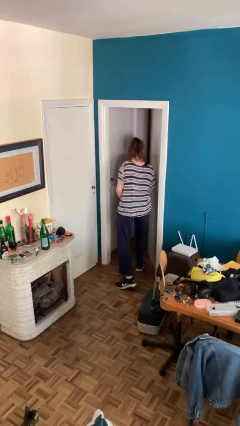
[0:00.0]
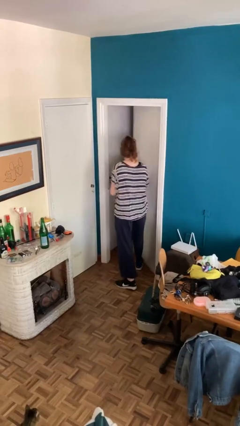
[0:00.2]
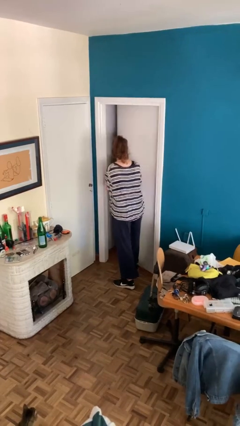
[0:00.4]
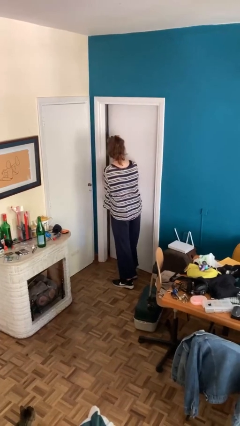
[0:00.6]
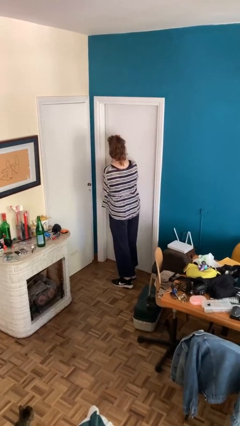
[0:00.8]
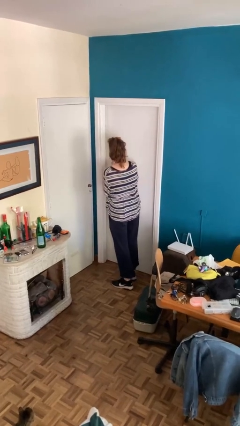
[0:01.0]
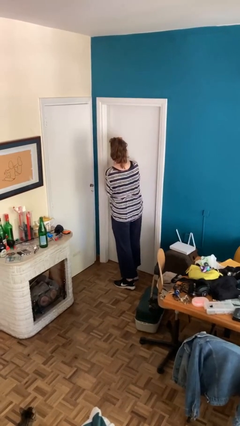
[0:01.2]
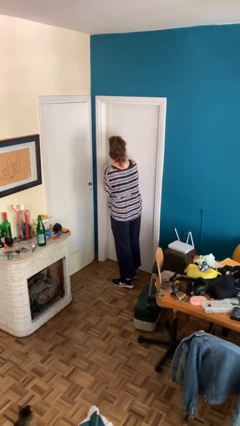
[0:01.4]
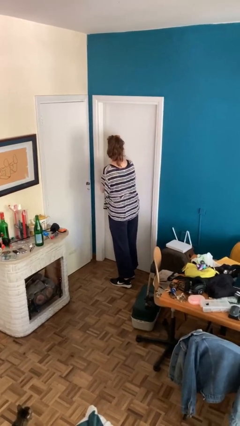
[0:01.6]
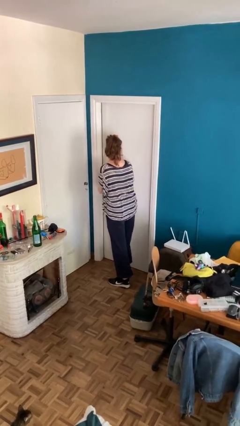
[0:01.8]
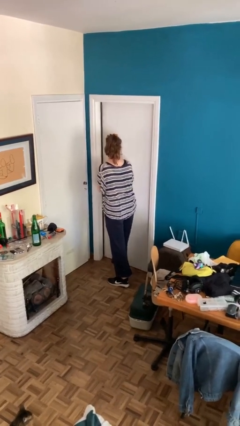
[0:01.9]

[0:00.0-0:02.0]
person closes facility door

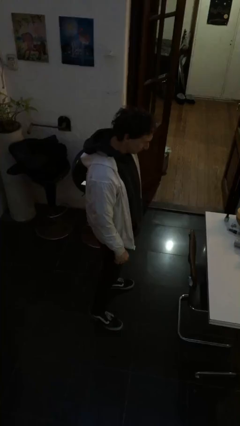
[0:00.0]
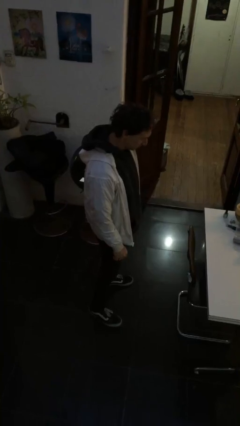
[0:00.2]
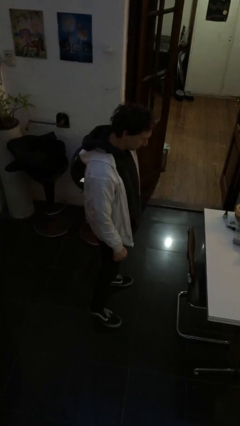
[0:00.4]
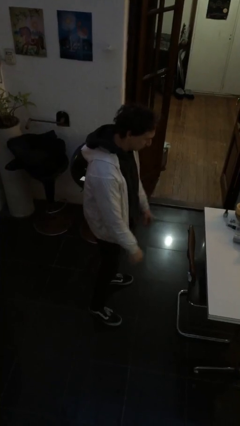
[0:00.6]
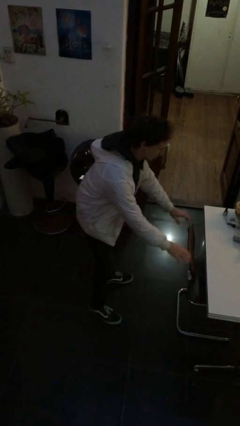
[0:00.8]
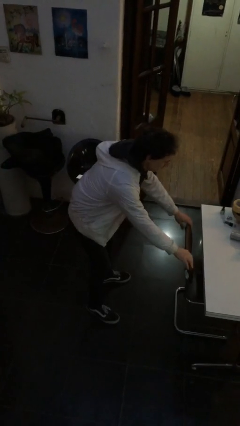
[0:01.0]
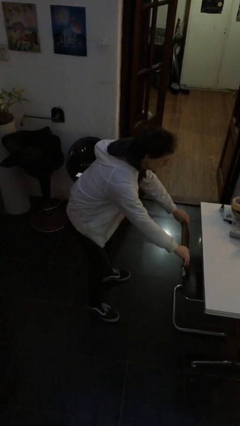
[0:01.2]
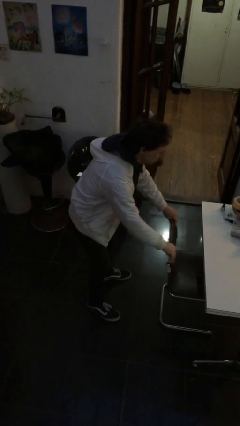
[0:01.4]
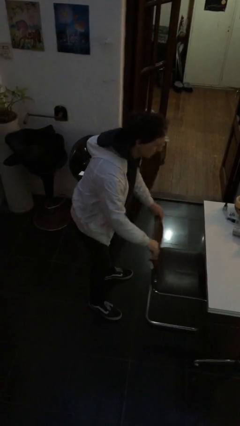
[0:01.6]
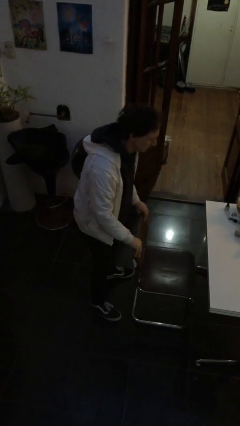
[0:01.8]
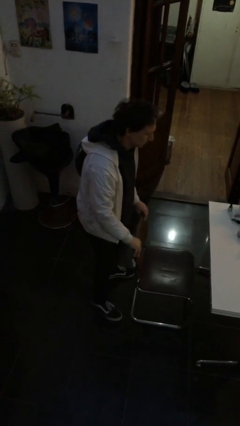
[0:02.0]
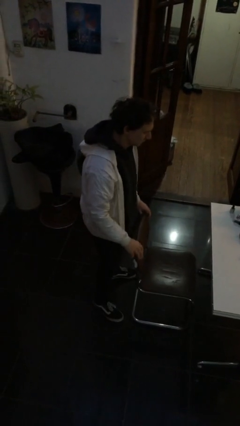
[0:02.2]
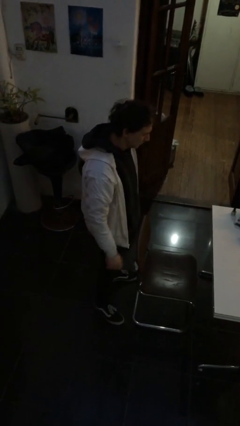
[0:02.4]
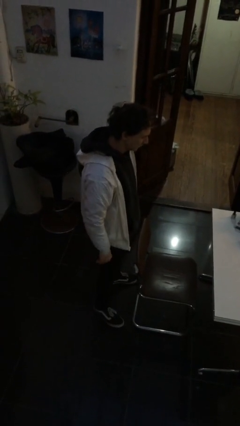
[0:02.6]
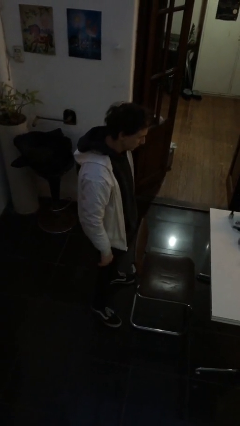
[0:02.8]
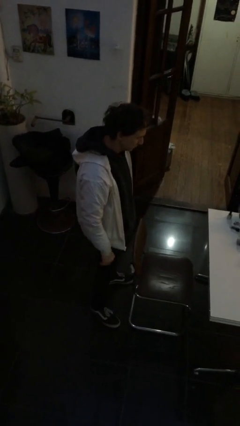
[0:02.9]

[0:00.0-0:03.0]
person pulls out chair

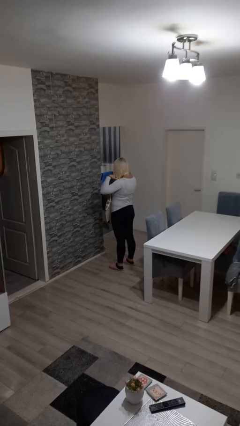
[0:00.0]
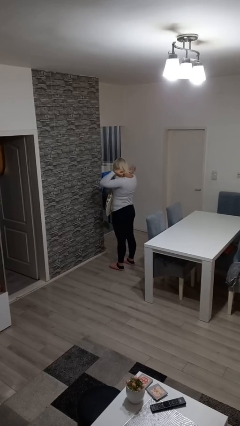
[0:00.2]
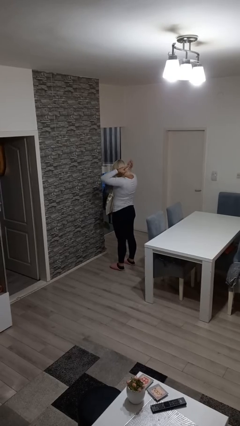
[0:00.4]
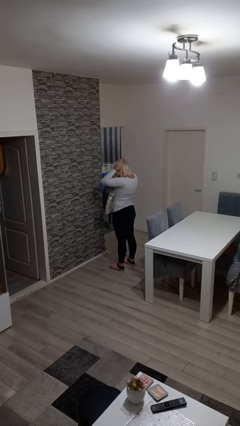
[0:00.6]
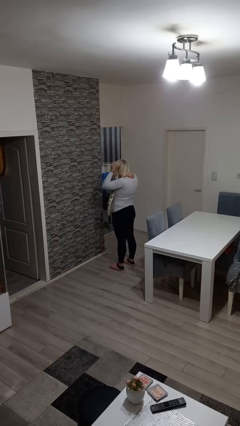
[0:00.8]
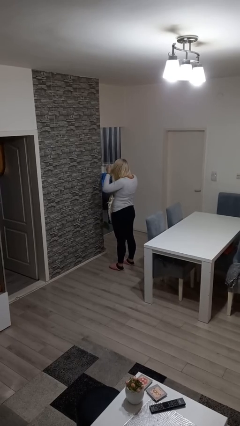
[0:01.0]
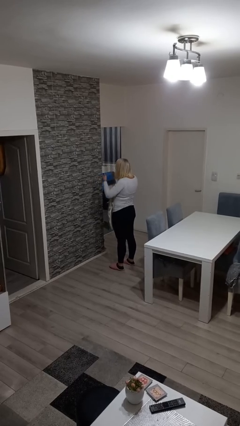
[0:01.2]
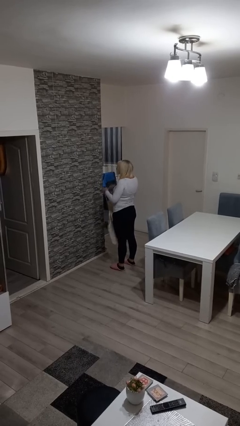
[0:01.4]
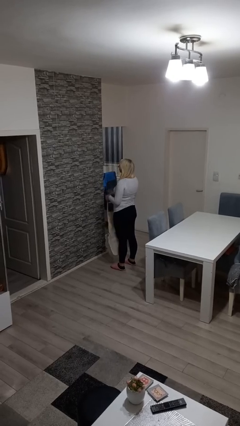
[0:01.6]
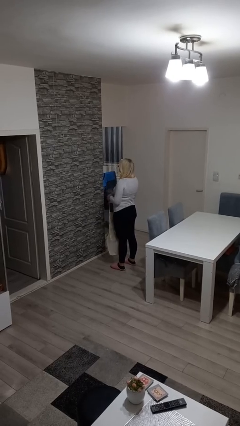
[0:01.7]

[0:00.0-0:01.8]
person takes off apron

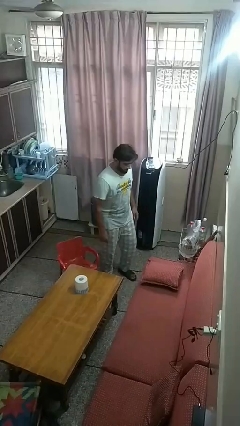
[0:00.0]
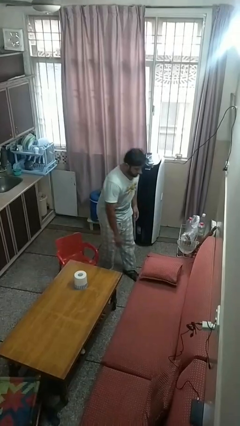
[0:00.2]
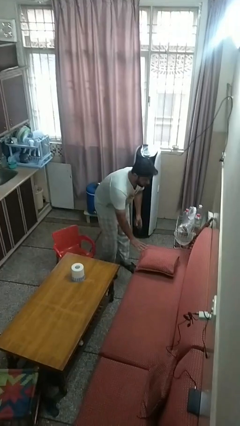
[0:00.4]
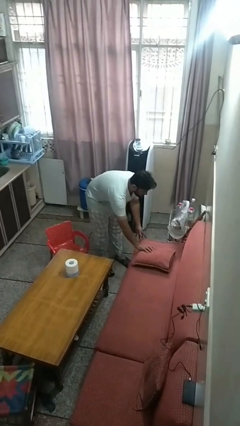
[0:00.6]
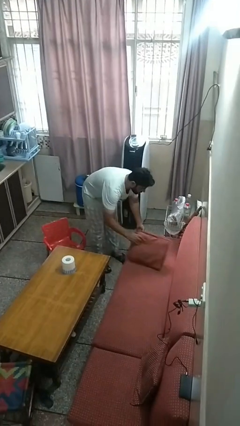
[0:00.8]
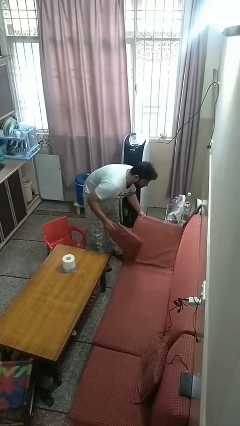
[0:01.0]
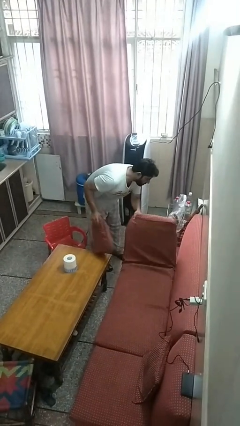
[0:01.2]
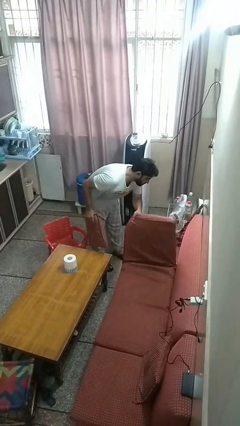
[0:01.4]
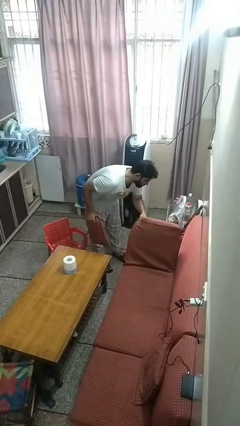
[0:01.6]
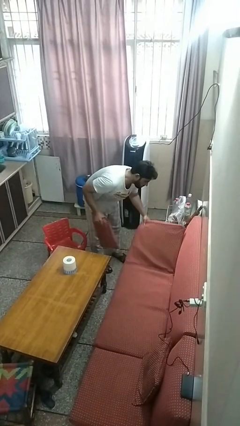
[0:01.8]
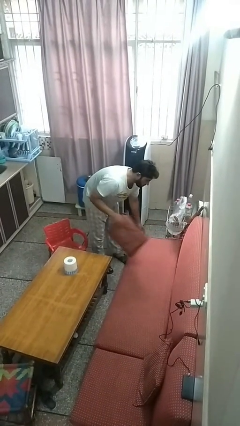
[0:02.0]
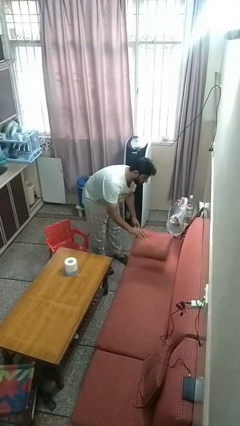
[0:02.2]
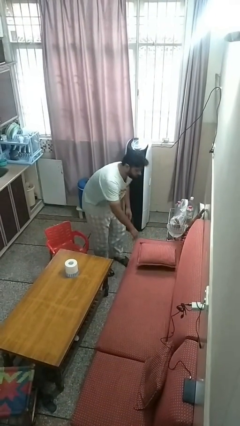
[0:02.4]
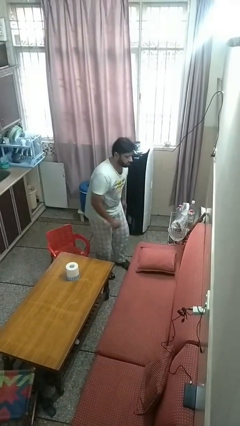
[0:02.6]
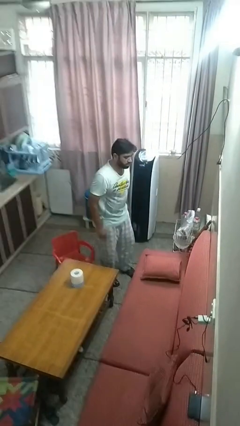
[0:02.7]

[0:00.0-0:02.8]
person searches under couch

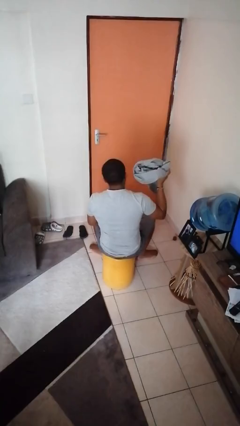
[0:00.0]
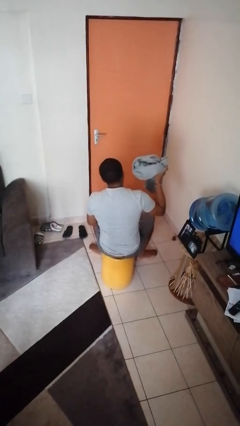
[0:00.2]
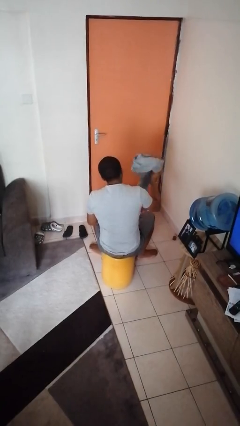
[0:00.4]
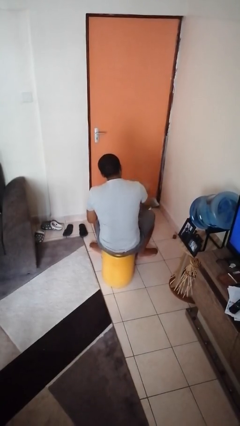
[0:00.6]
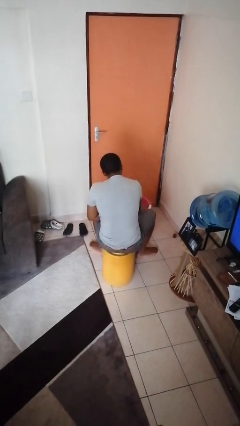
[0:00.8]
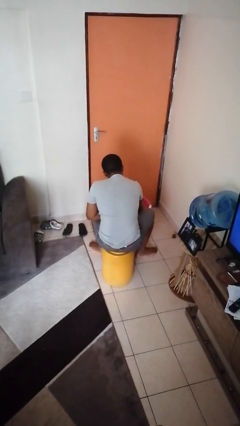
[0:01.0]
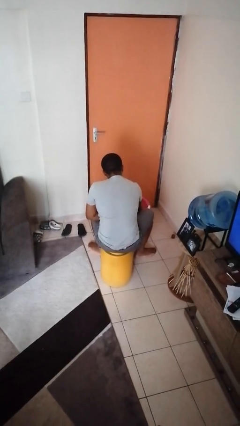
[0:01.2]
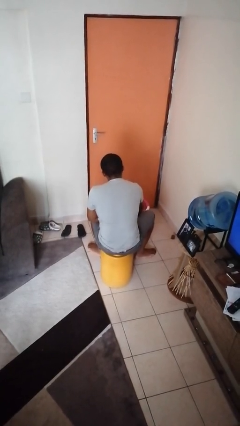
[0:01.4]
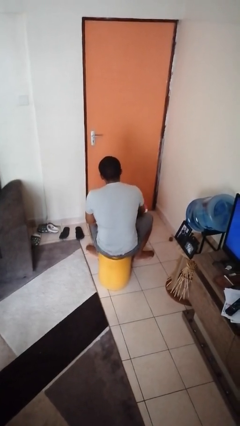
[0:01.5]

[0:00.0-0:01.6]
person puts object into basket

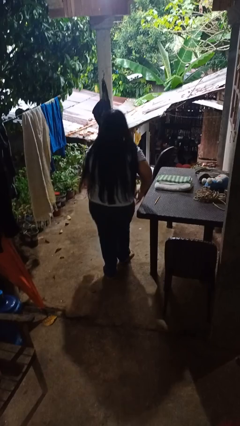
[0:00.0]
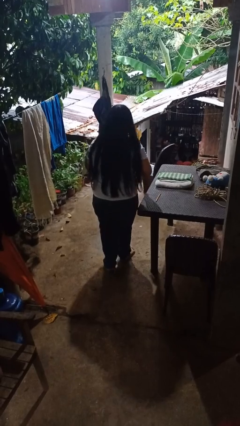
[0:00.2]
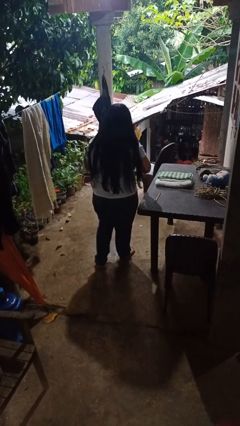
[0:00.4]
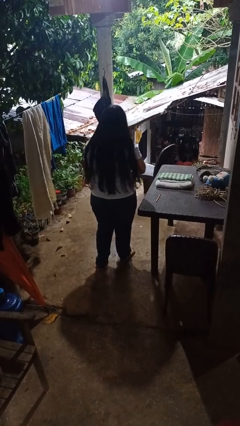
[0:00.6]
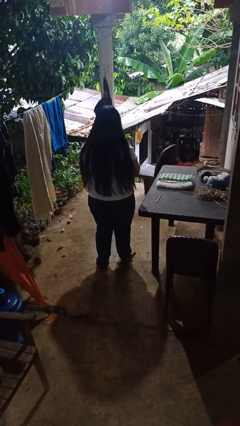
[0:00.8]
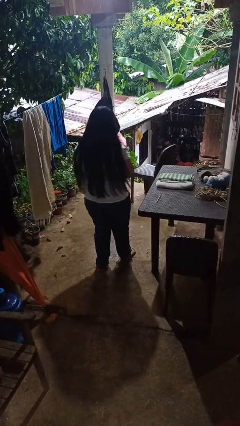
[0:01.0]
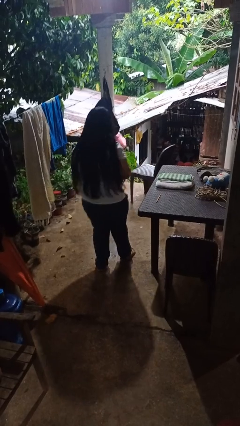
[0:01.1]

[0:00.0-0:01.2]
person bumps into table

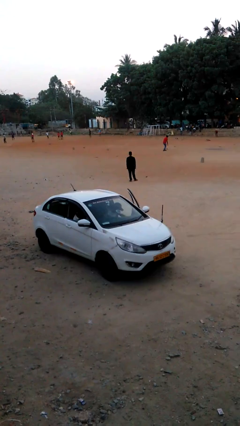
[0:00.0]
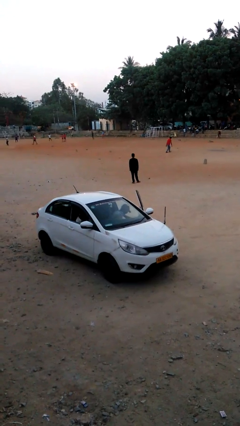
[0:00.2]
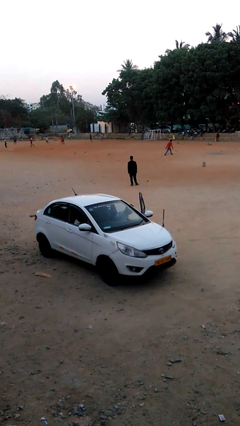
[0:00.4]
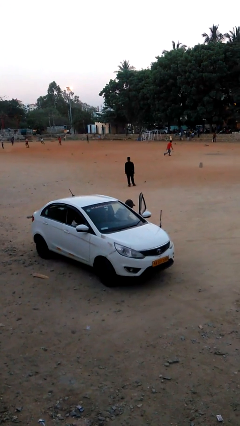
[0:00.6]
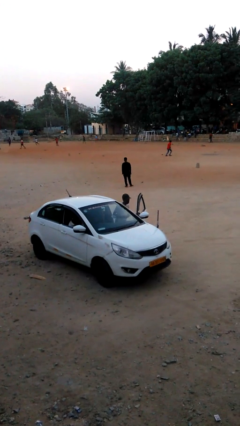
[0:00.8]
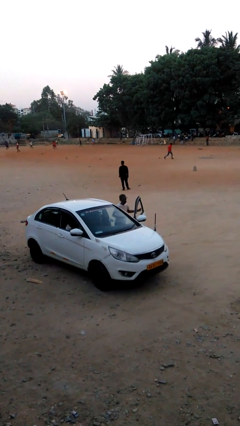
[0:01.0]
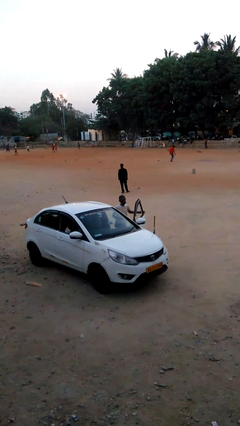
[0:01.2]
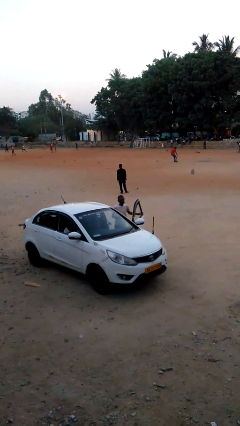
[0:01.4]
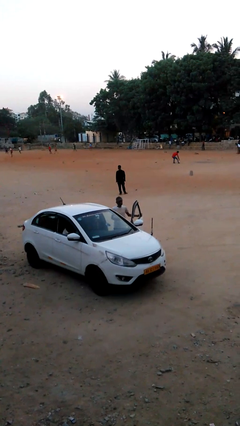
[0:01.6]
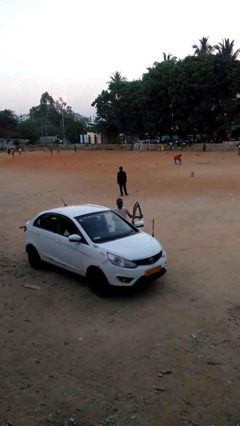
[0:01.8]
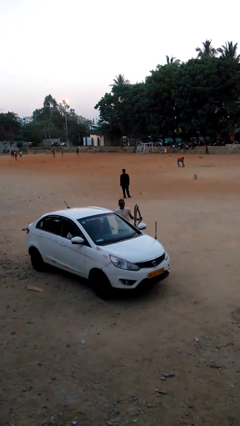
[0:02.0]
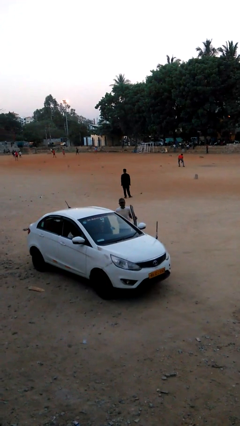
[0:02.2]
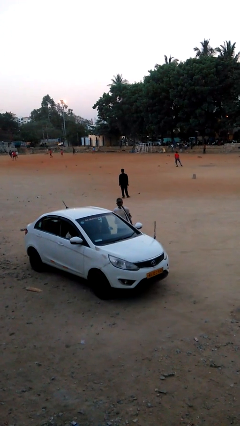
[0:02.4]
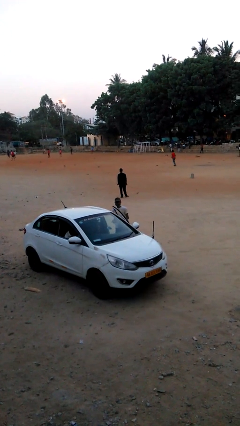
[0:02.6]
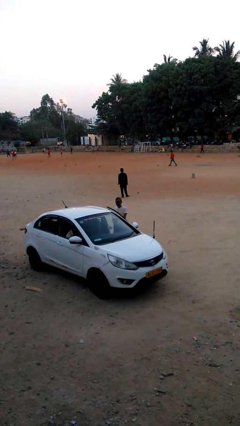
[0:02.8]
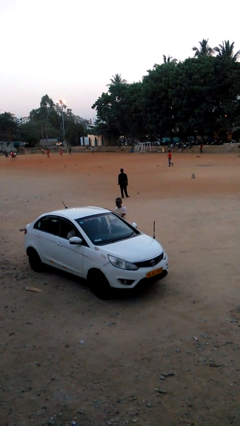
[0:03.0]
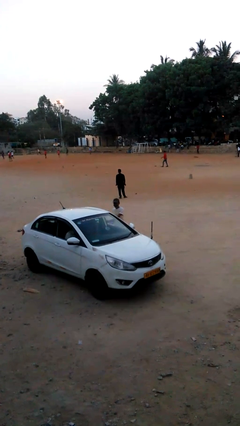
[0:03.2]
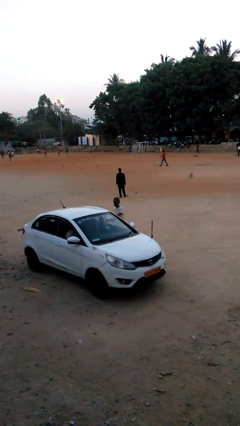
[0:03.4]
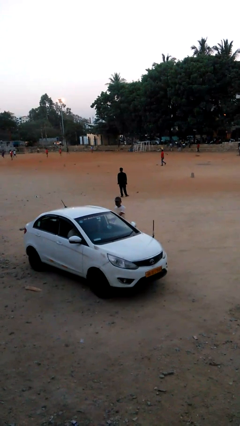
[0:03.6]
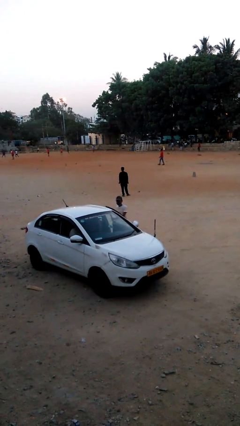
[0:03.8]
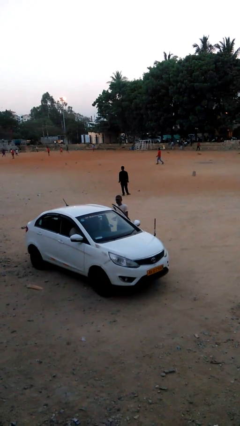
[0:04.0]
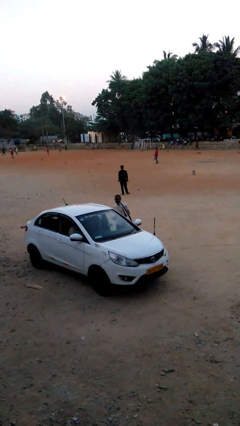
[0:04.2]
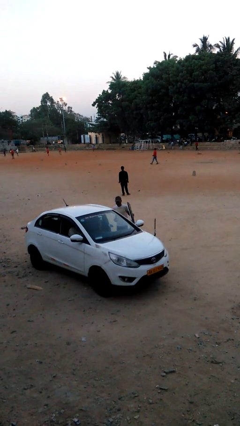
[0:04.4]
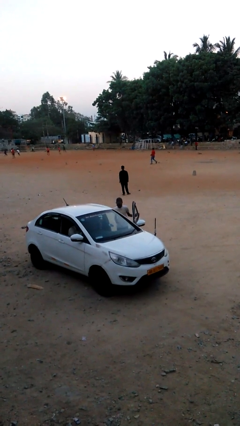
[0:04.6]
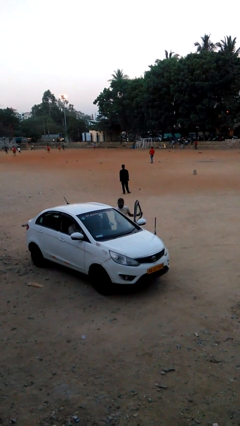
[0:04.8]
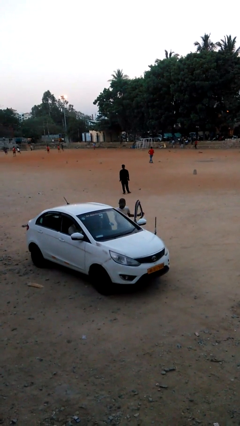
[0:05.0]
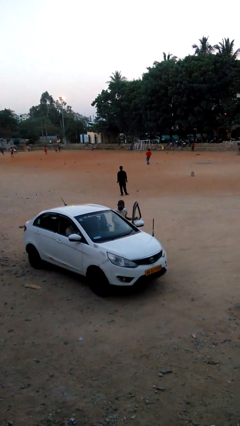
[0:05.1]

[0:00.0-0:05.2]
person exits car
